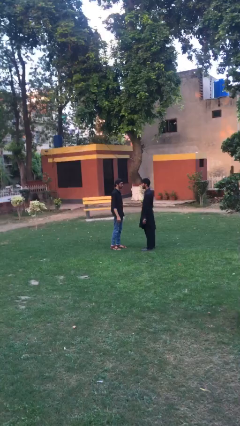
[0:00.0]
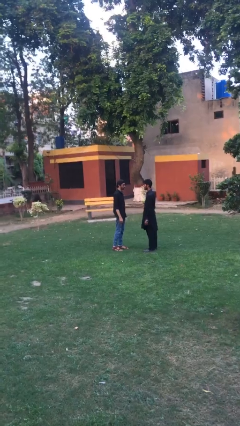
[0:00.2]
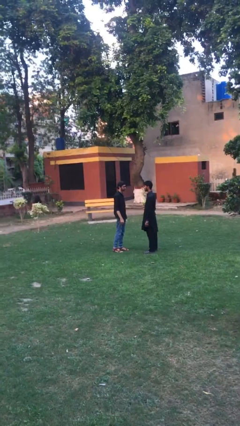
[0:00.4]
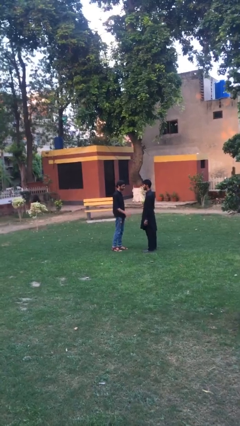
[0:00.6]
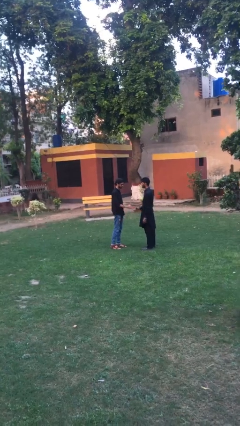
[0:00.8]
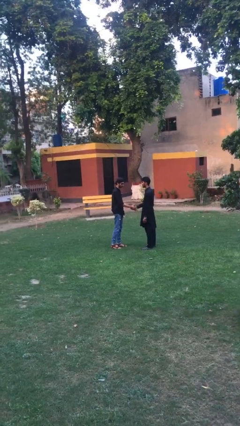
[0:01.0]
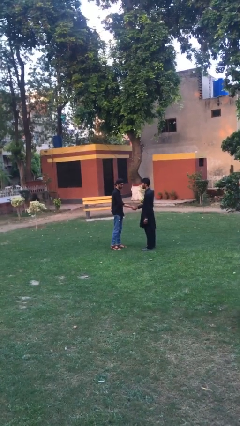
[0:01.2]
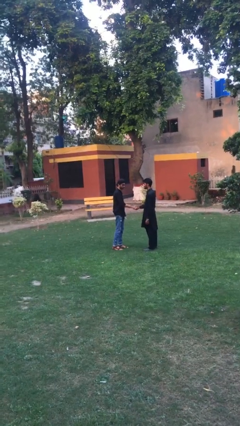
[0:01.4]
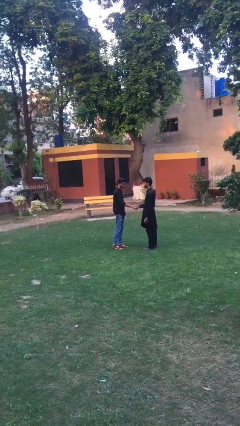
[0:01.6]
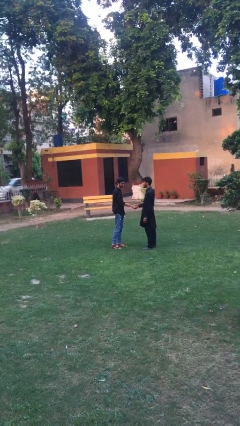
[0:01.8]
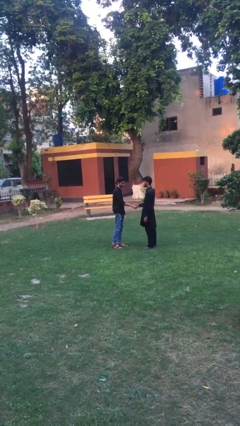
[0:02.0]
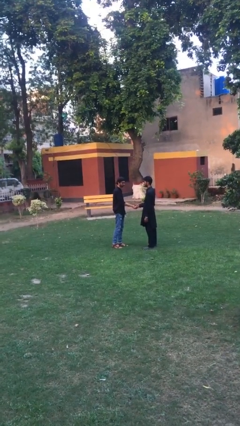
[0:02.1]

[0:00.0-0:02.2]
person shakes hand

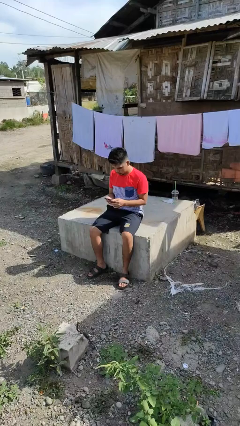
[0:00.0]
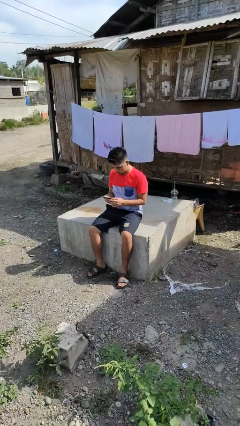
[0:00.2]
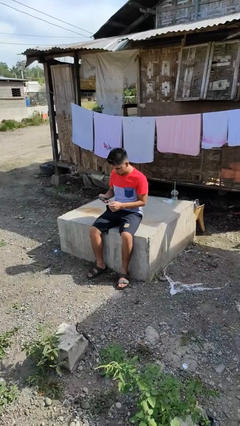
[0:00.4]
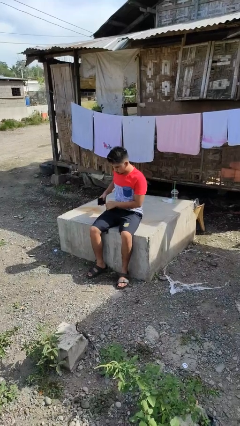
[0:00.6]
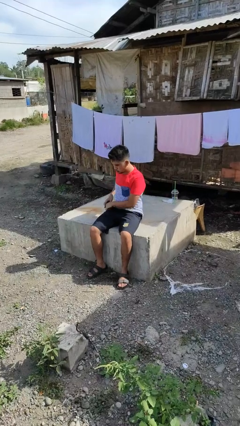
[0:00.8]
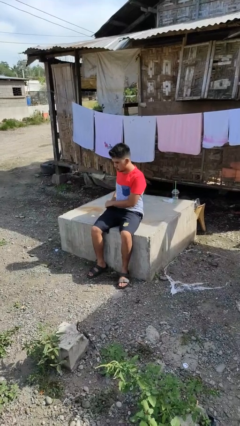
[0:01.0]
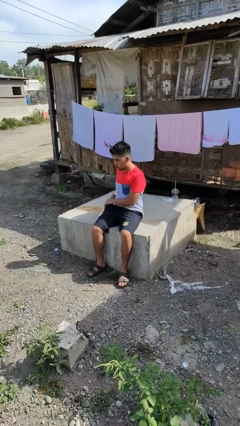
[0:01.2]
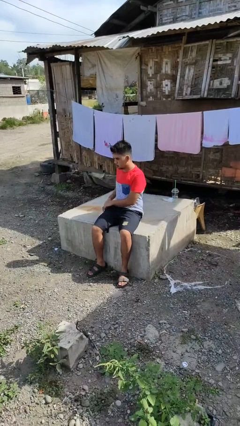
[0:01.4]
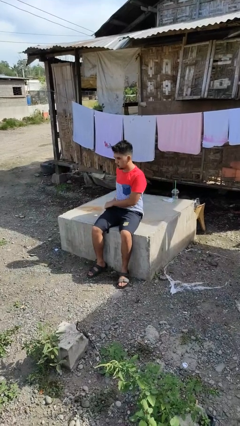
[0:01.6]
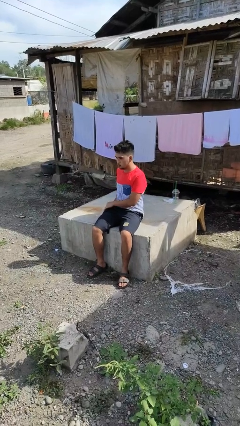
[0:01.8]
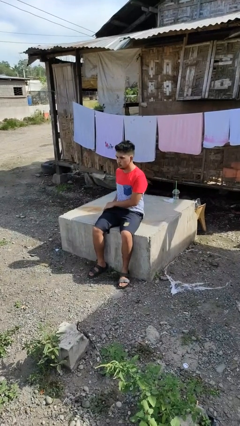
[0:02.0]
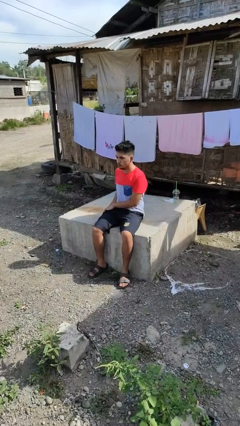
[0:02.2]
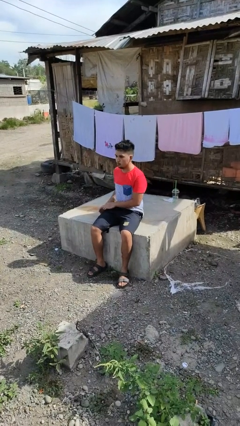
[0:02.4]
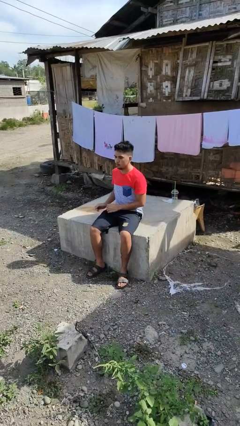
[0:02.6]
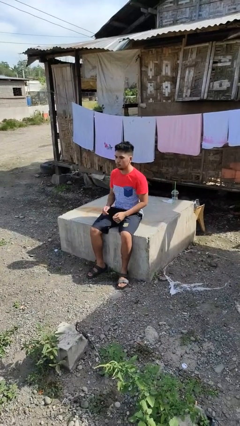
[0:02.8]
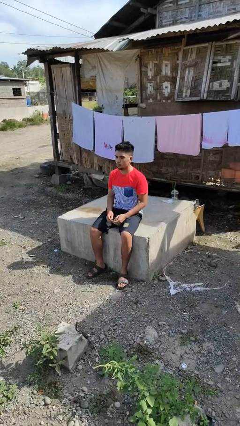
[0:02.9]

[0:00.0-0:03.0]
person puts phone into pocket

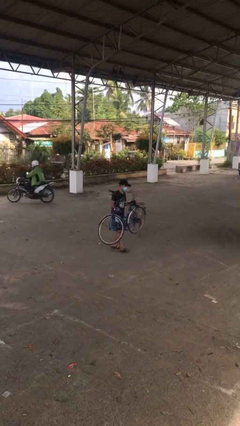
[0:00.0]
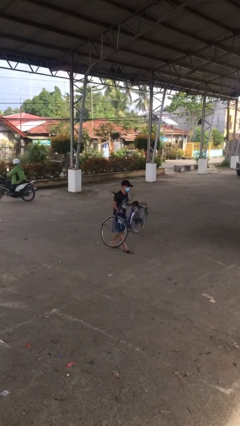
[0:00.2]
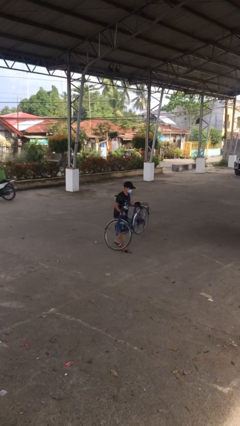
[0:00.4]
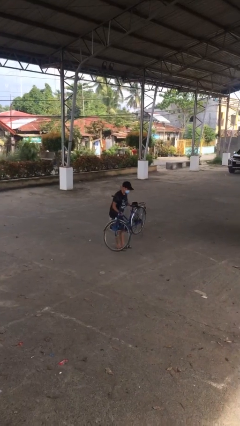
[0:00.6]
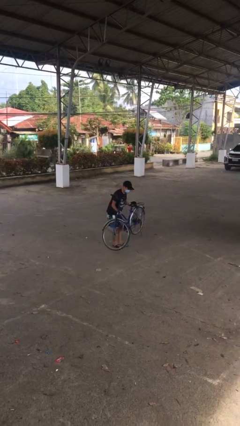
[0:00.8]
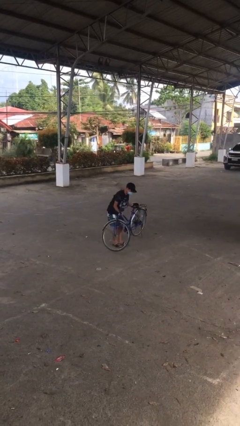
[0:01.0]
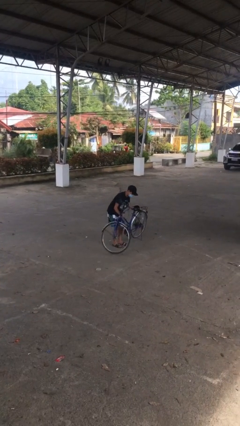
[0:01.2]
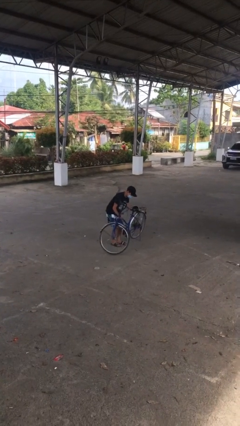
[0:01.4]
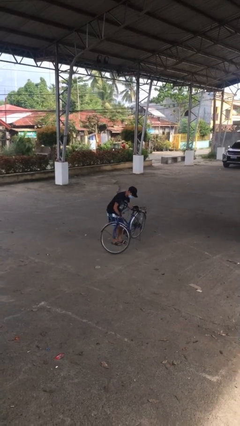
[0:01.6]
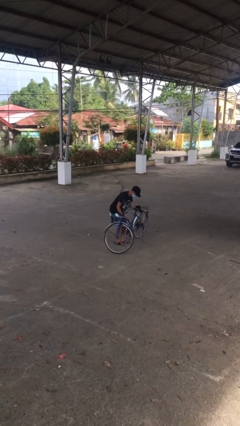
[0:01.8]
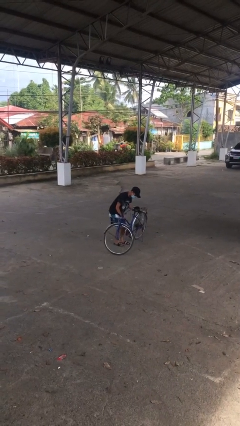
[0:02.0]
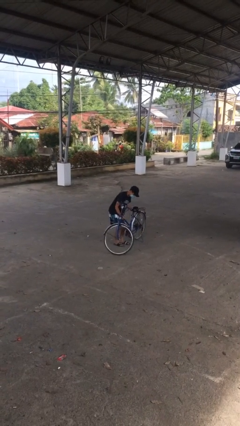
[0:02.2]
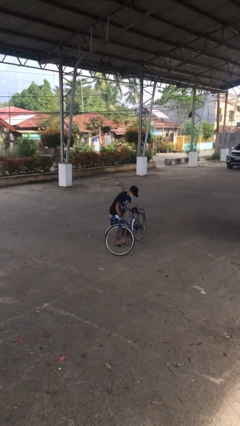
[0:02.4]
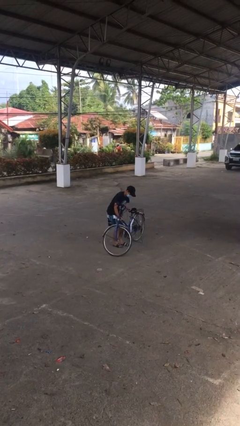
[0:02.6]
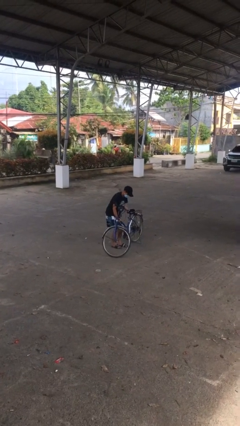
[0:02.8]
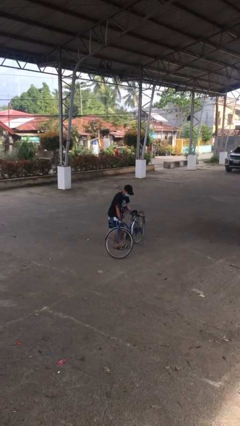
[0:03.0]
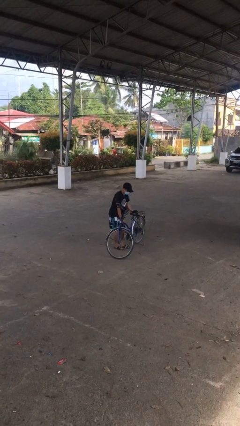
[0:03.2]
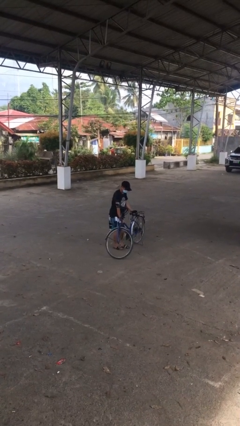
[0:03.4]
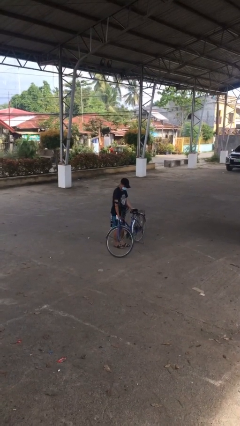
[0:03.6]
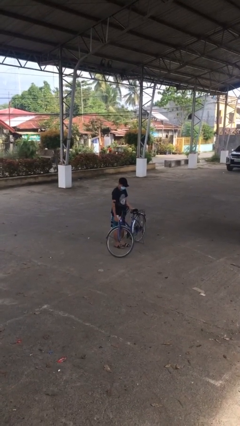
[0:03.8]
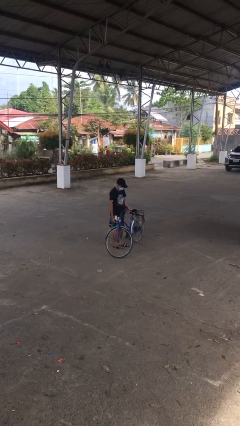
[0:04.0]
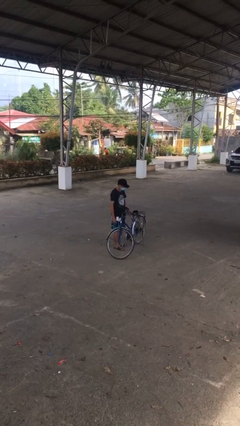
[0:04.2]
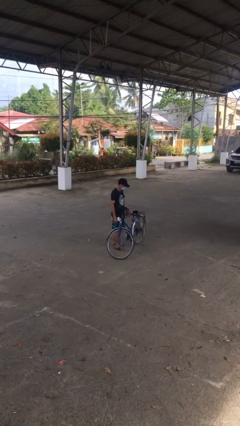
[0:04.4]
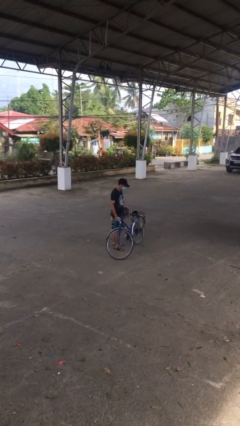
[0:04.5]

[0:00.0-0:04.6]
person puts down object on floor

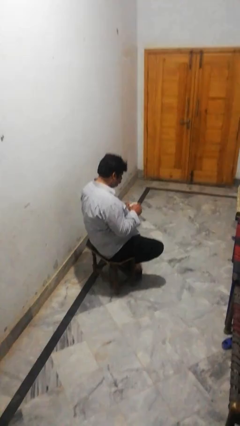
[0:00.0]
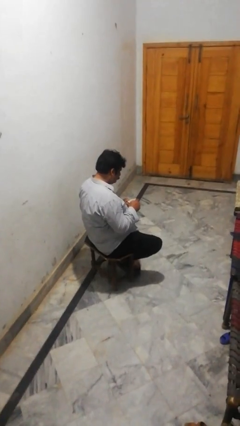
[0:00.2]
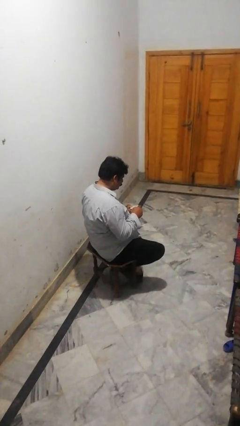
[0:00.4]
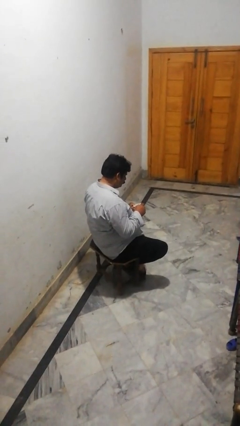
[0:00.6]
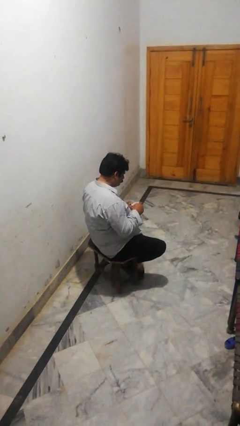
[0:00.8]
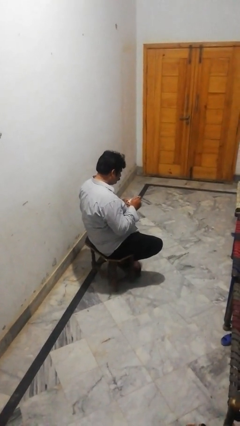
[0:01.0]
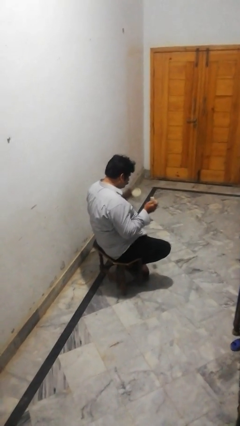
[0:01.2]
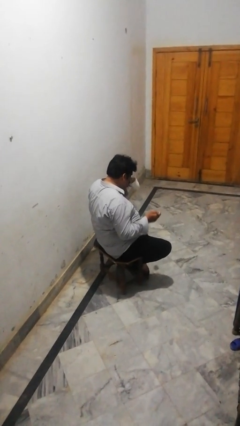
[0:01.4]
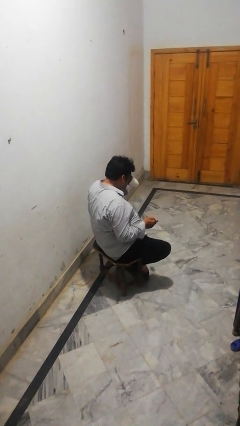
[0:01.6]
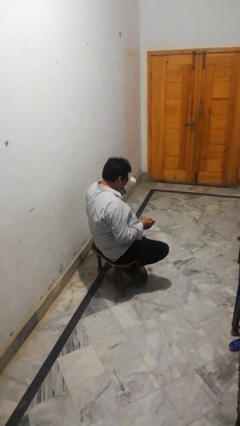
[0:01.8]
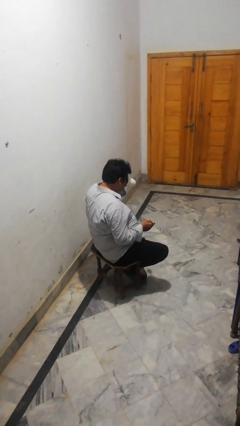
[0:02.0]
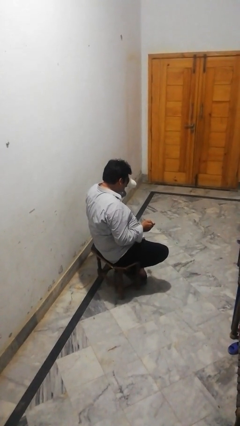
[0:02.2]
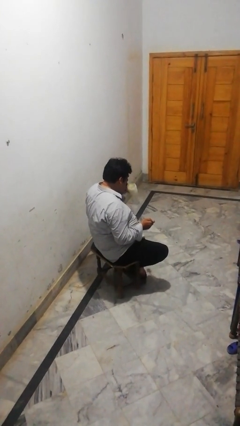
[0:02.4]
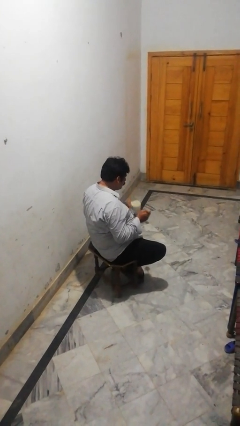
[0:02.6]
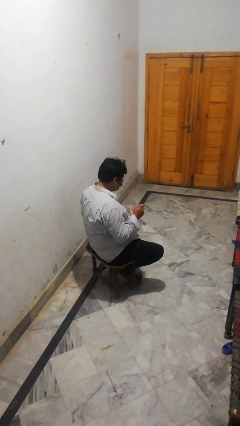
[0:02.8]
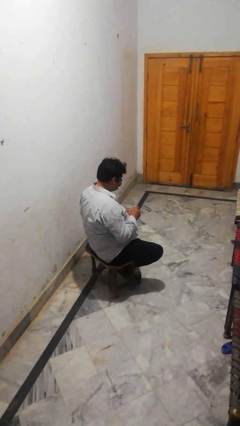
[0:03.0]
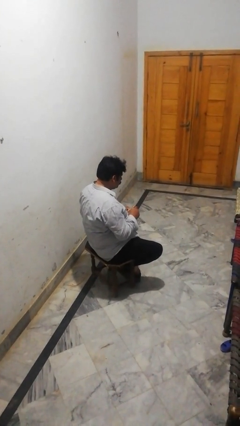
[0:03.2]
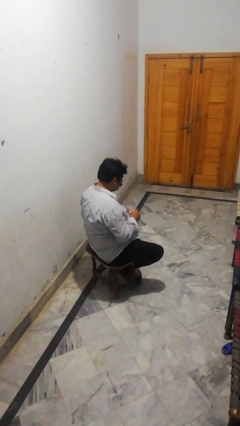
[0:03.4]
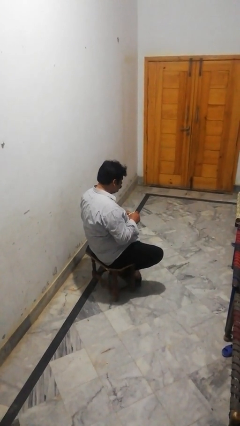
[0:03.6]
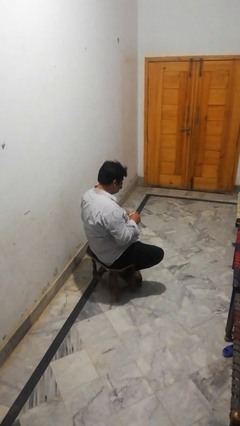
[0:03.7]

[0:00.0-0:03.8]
person drinks from mug

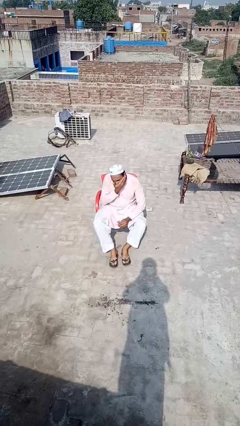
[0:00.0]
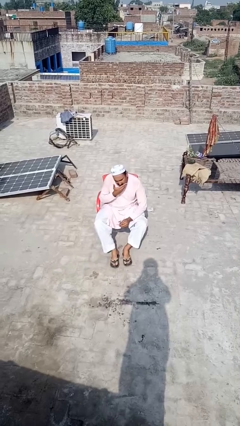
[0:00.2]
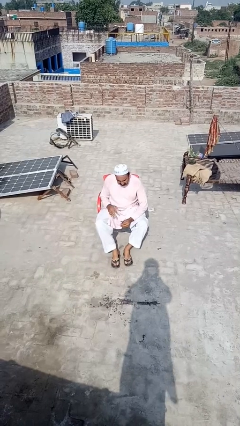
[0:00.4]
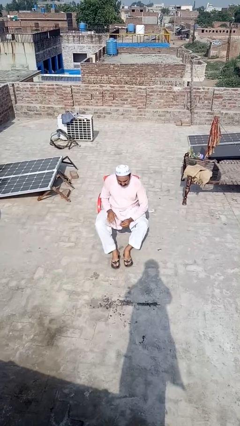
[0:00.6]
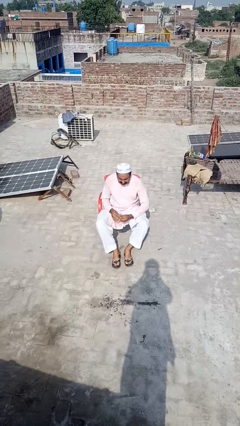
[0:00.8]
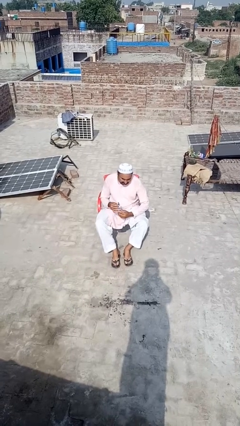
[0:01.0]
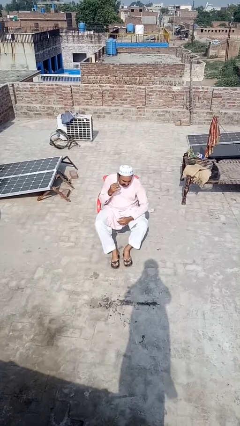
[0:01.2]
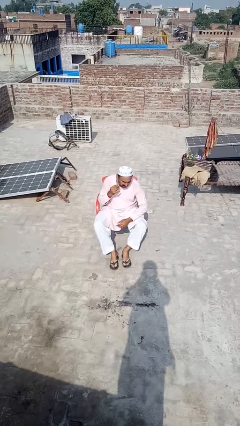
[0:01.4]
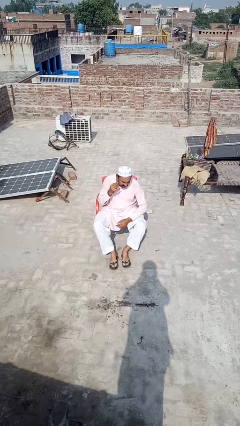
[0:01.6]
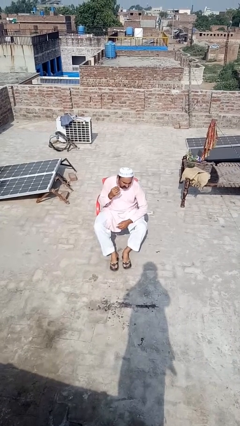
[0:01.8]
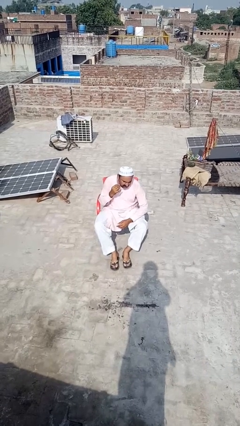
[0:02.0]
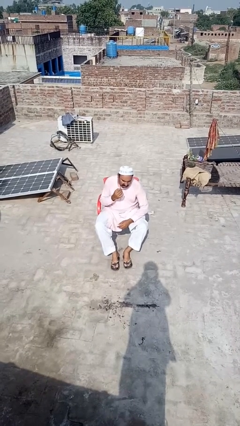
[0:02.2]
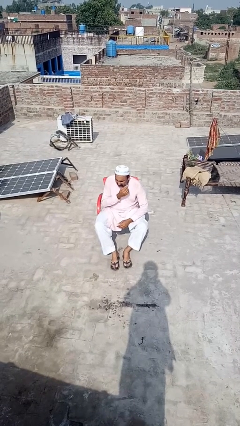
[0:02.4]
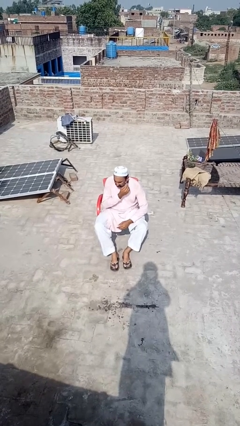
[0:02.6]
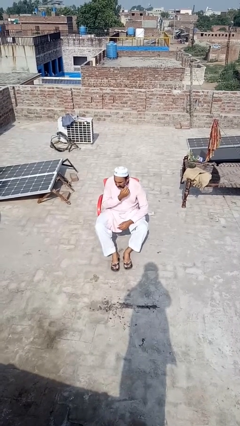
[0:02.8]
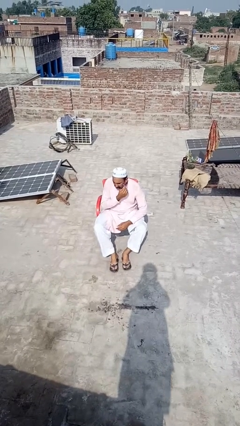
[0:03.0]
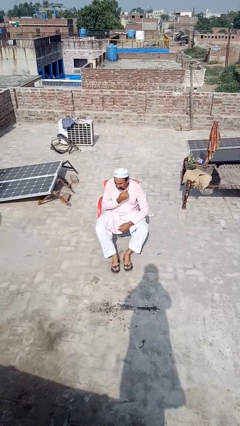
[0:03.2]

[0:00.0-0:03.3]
person shaves face

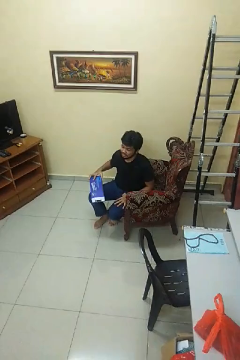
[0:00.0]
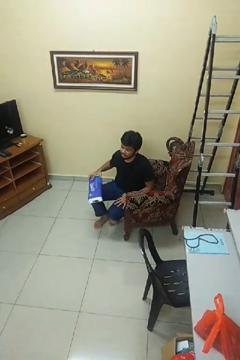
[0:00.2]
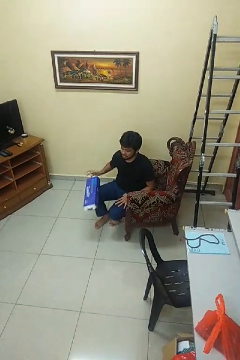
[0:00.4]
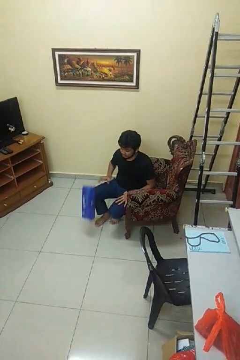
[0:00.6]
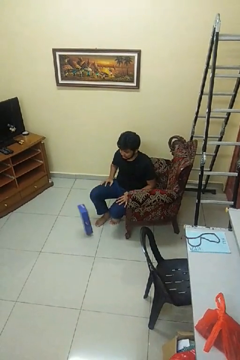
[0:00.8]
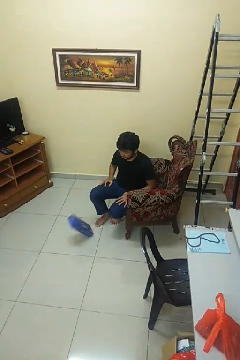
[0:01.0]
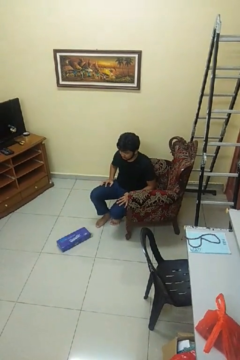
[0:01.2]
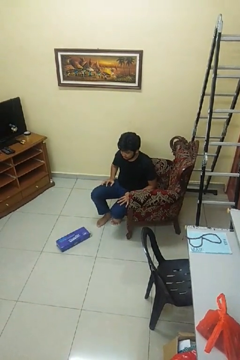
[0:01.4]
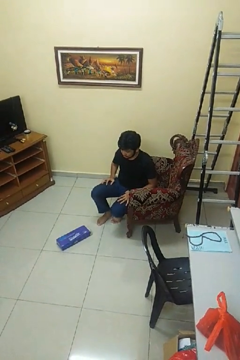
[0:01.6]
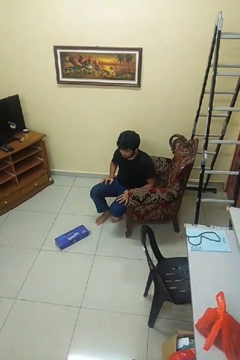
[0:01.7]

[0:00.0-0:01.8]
person drops object
